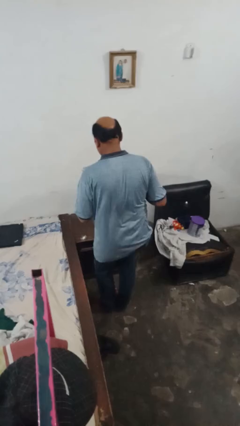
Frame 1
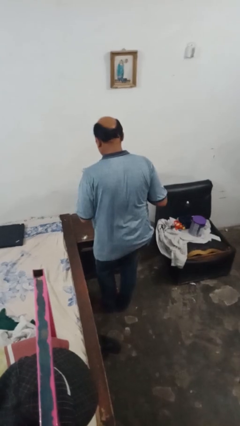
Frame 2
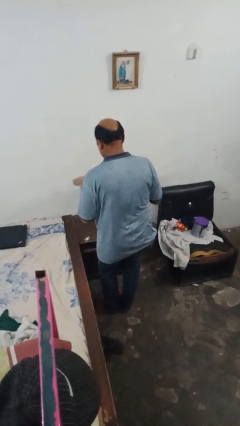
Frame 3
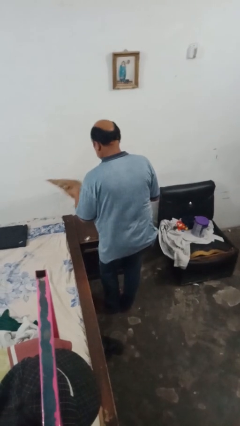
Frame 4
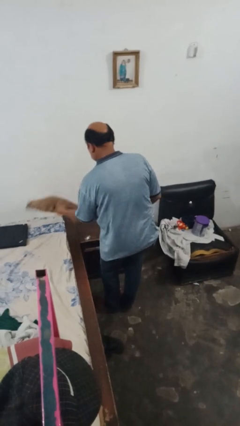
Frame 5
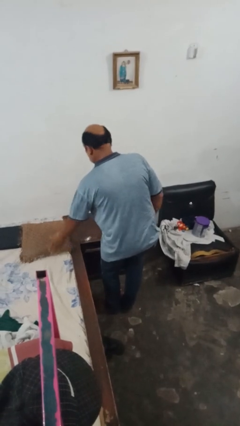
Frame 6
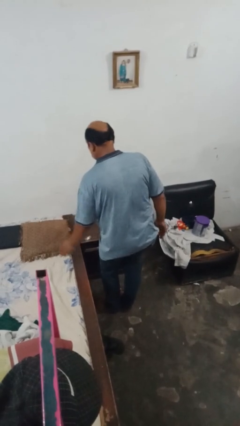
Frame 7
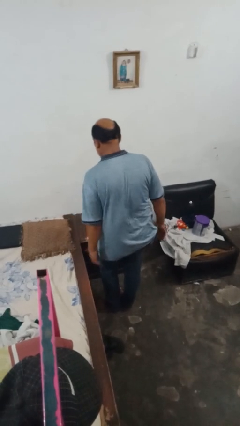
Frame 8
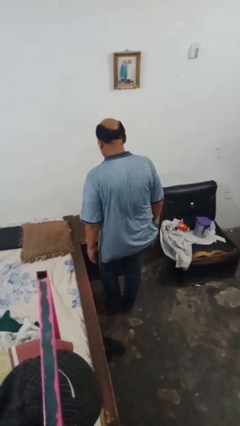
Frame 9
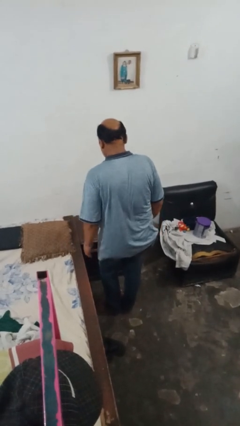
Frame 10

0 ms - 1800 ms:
person puts down object on bed

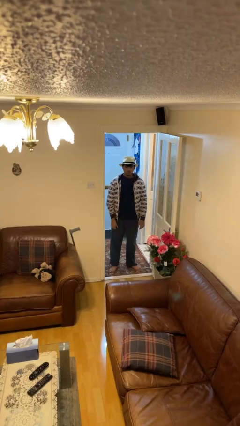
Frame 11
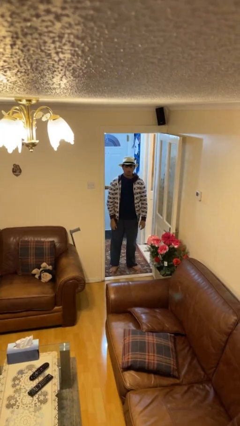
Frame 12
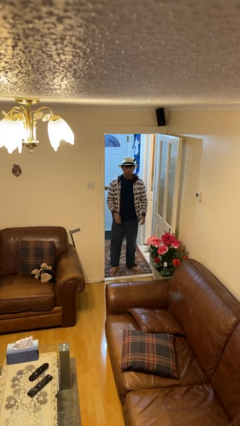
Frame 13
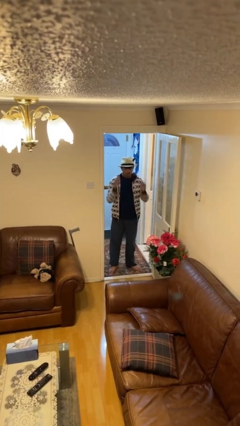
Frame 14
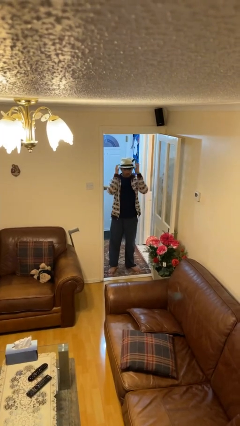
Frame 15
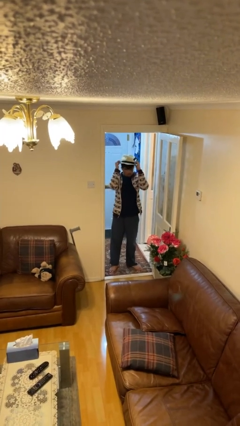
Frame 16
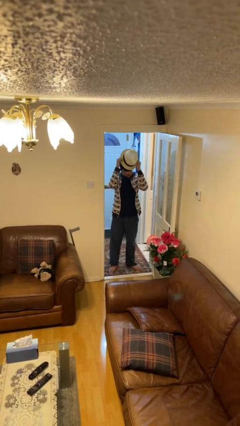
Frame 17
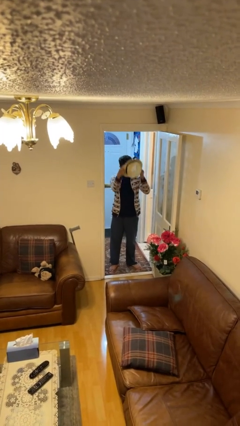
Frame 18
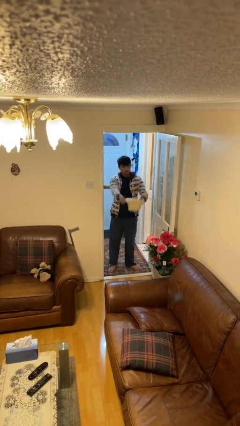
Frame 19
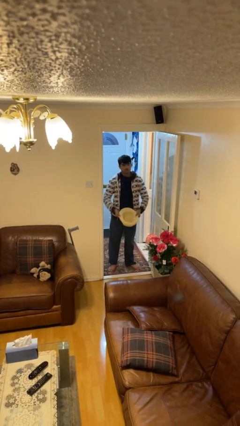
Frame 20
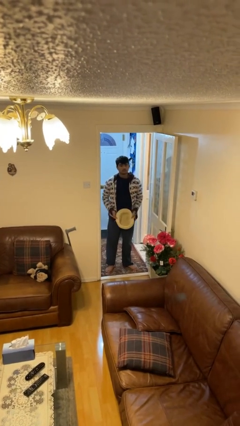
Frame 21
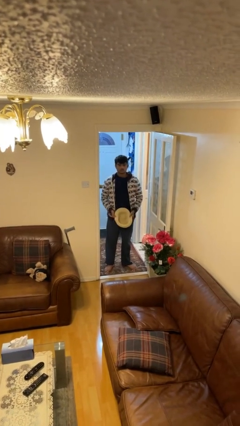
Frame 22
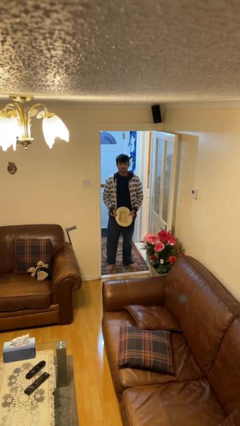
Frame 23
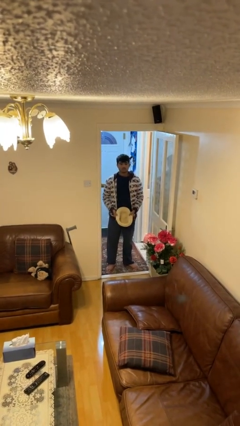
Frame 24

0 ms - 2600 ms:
person takes off hat

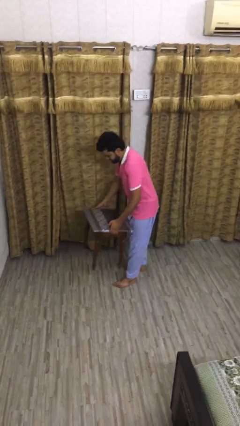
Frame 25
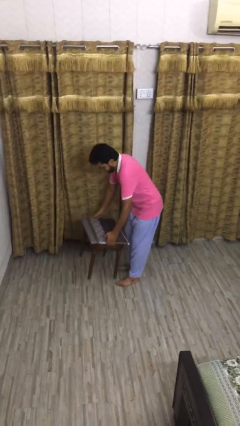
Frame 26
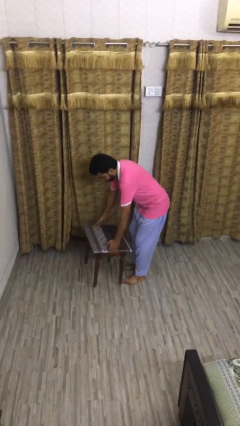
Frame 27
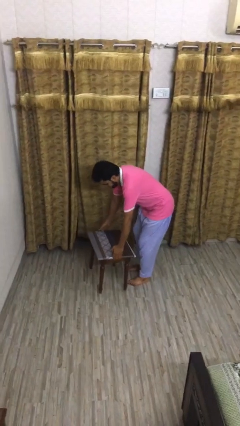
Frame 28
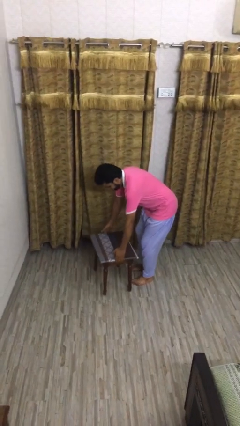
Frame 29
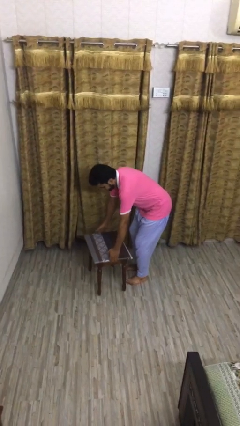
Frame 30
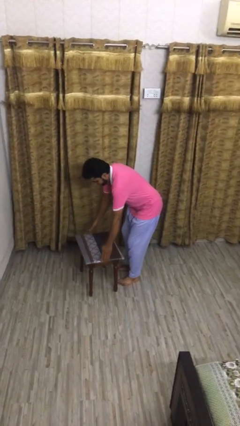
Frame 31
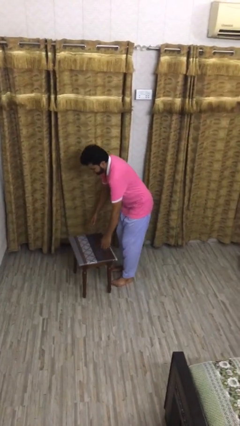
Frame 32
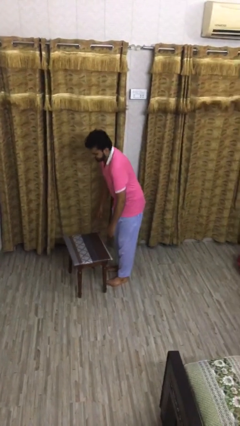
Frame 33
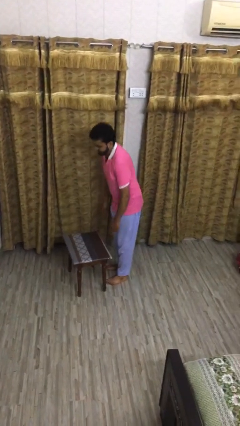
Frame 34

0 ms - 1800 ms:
person puts down object on floor

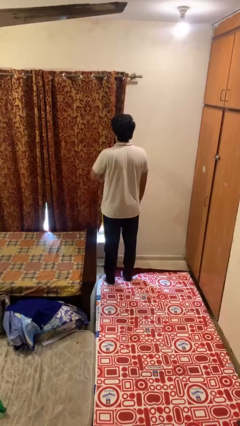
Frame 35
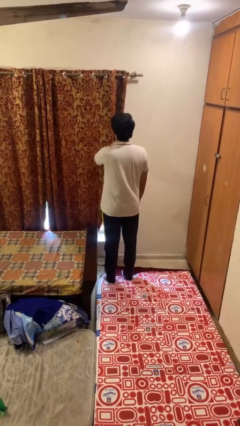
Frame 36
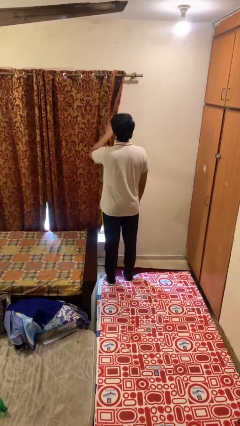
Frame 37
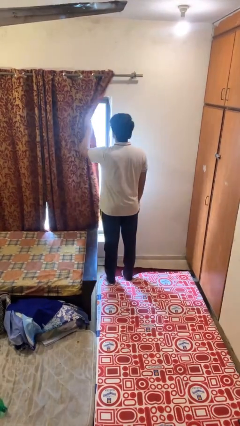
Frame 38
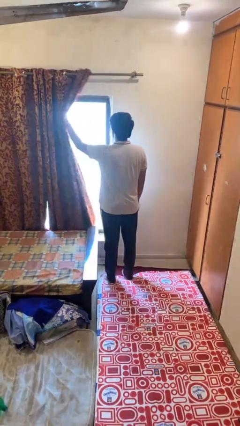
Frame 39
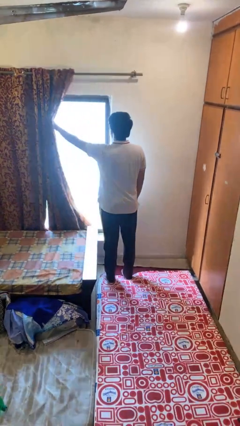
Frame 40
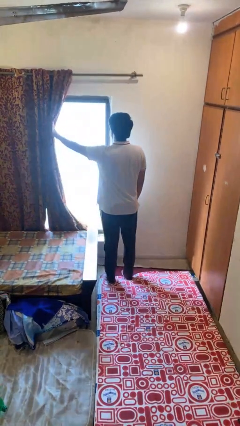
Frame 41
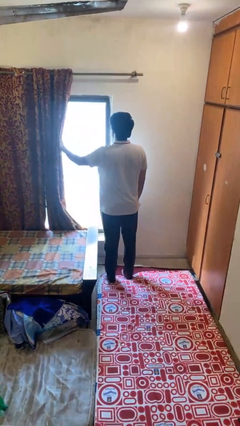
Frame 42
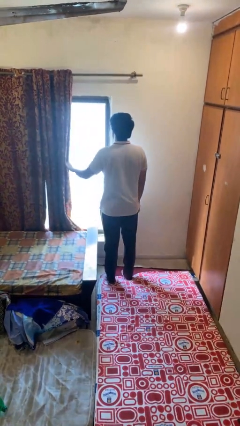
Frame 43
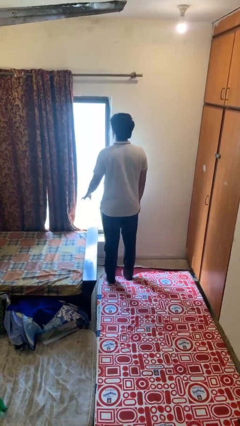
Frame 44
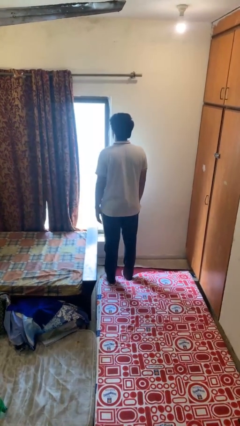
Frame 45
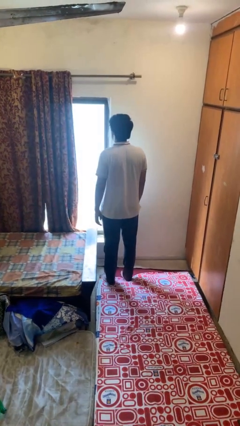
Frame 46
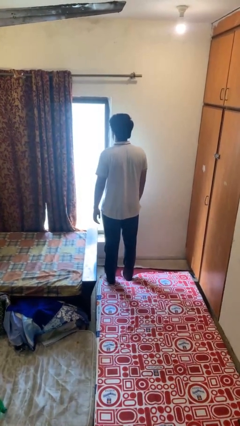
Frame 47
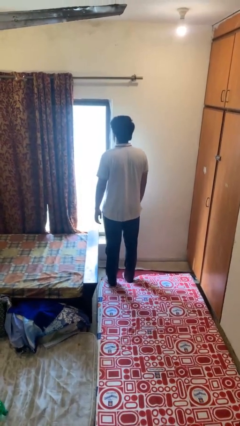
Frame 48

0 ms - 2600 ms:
person opens curtains

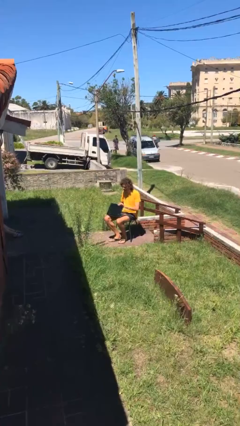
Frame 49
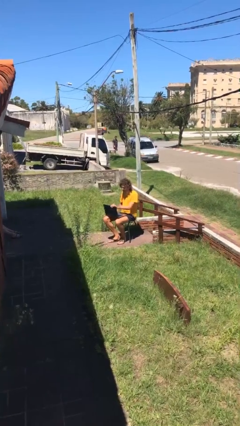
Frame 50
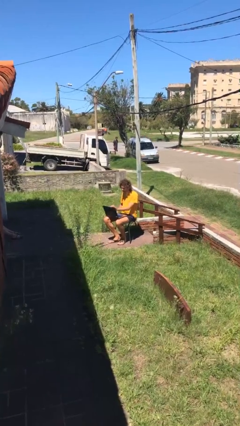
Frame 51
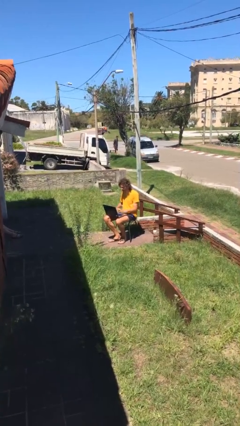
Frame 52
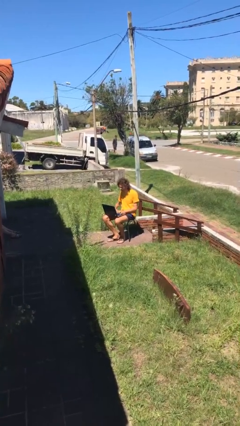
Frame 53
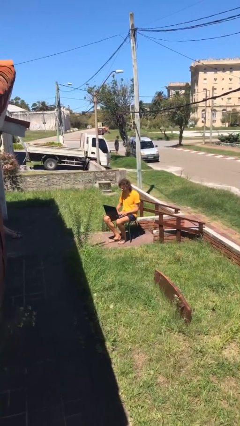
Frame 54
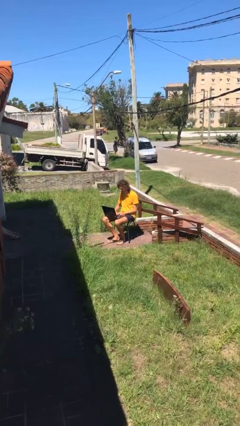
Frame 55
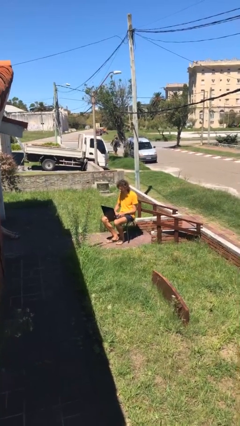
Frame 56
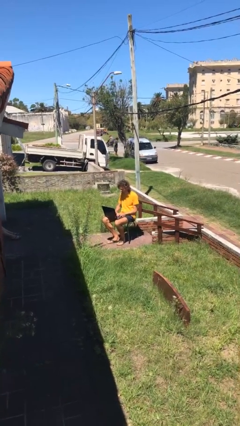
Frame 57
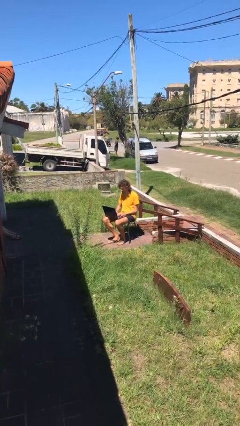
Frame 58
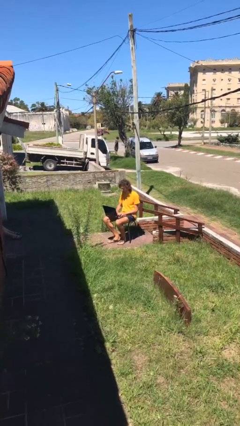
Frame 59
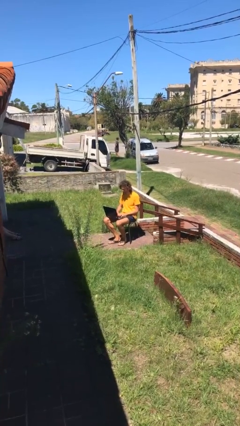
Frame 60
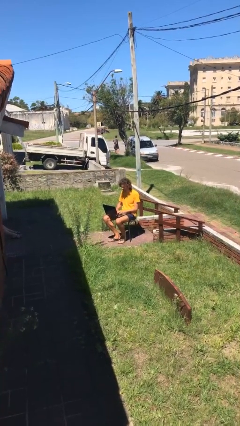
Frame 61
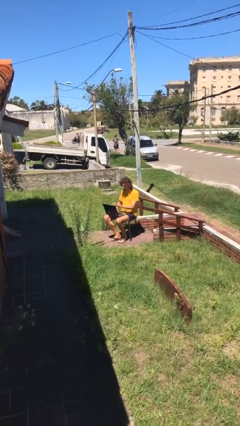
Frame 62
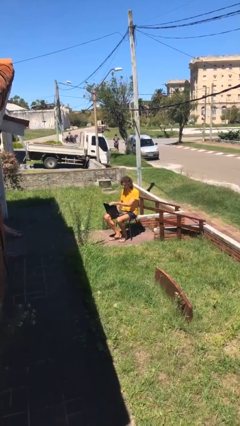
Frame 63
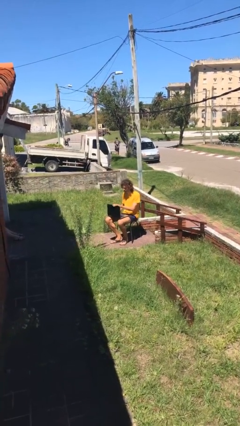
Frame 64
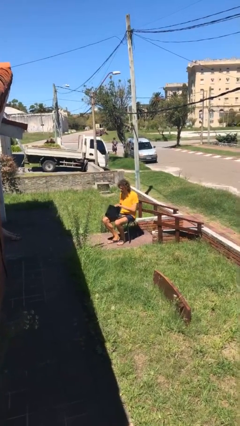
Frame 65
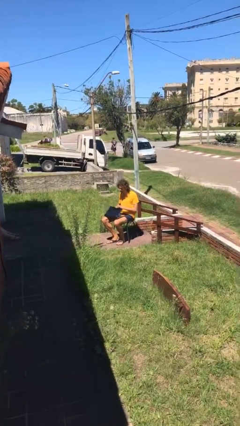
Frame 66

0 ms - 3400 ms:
person interacts with laptop

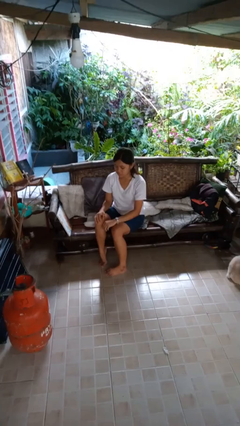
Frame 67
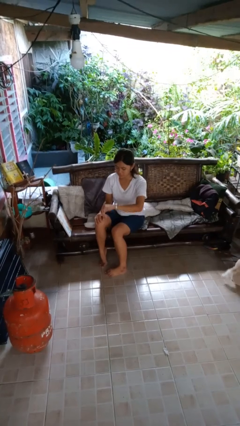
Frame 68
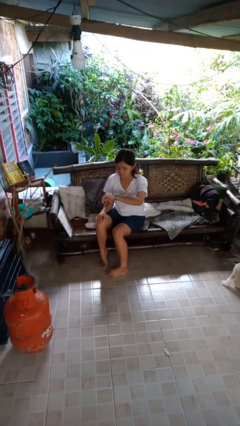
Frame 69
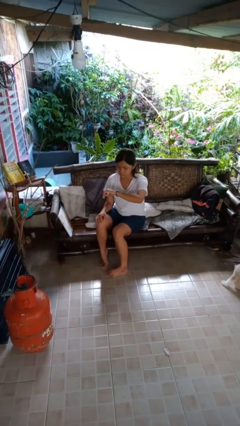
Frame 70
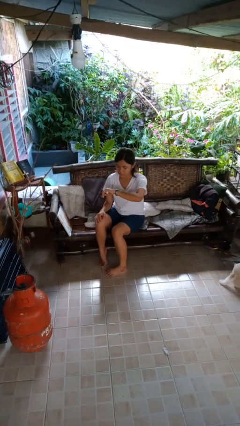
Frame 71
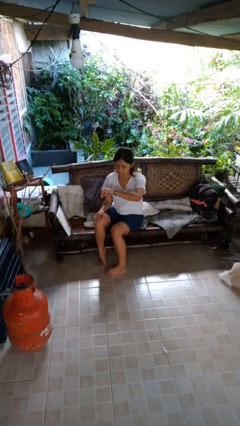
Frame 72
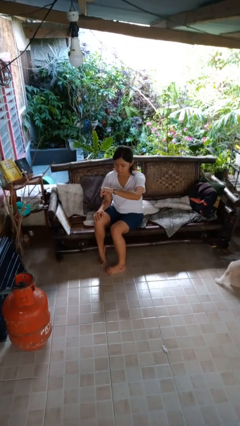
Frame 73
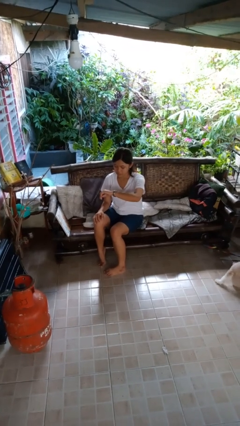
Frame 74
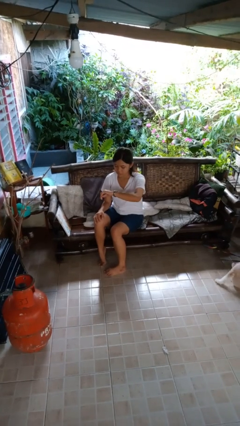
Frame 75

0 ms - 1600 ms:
person looks at wristwatch

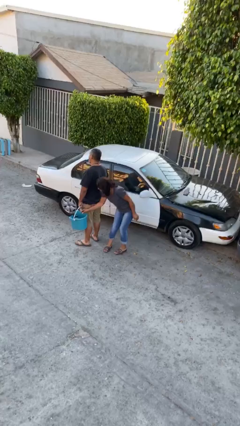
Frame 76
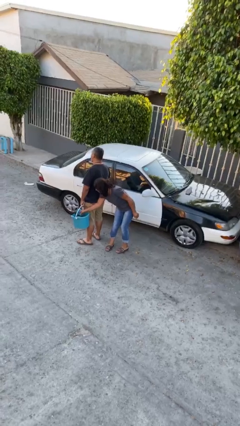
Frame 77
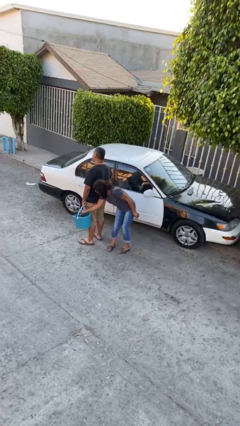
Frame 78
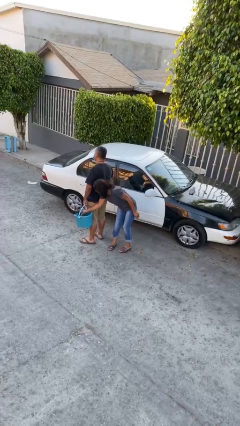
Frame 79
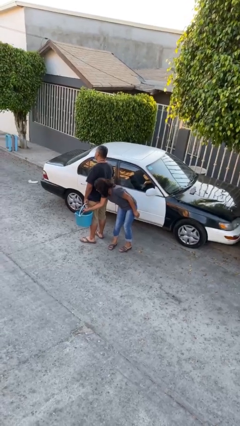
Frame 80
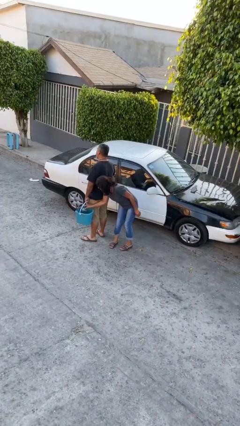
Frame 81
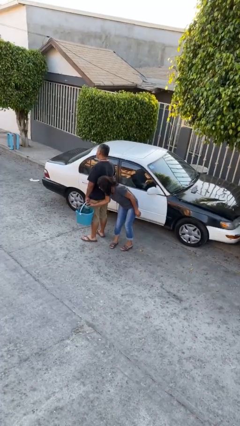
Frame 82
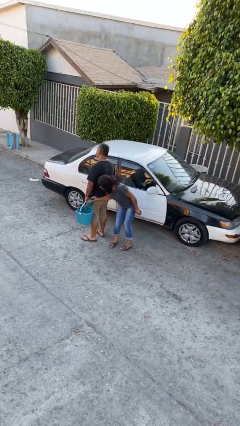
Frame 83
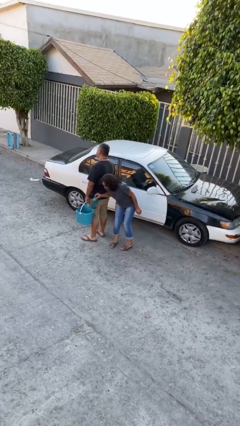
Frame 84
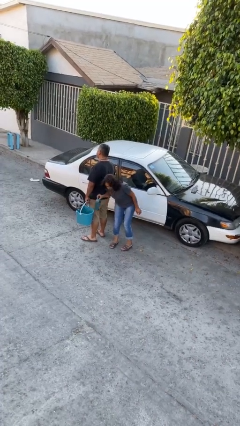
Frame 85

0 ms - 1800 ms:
person steals object from person

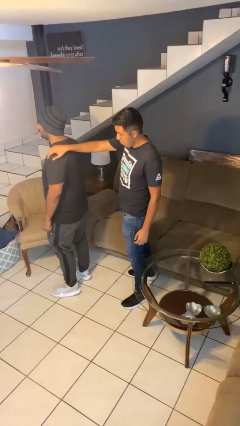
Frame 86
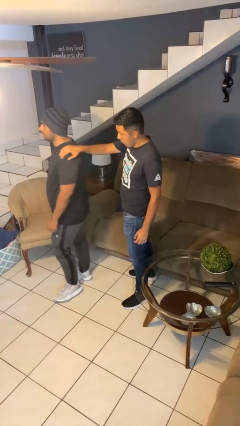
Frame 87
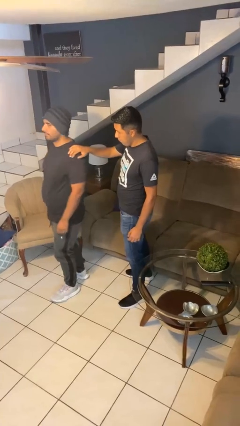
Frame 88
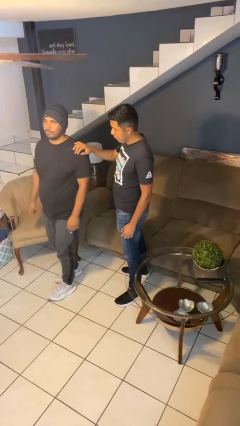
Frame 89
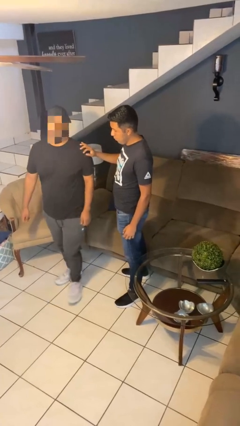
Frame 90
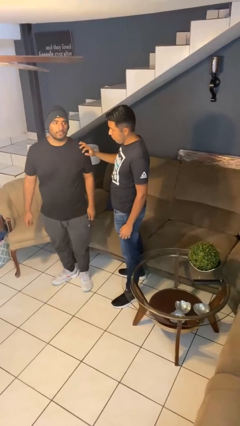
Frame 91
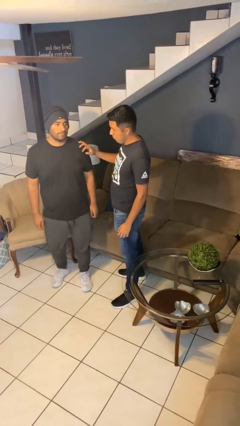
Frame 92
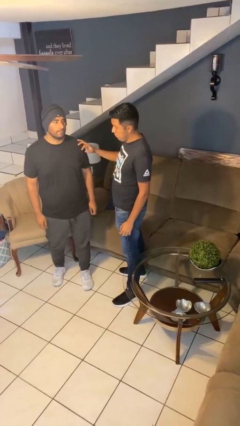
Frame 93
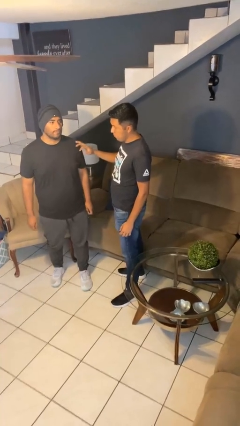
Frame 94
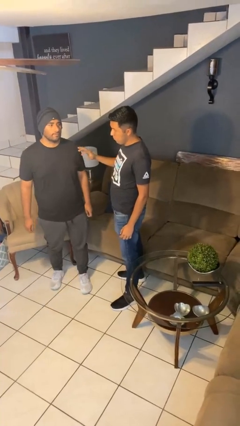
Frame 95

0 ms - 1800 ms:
person spins person around
